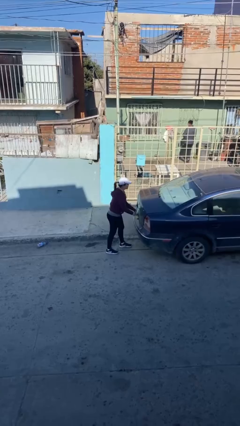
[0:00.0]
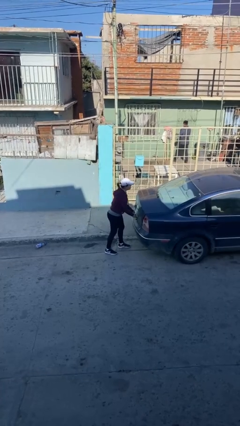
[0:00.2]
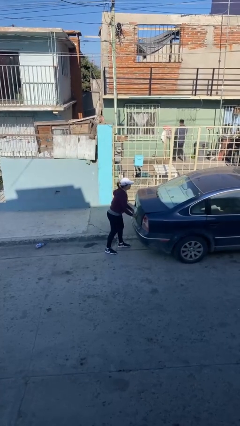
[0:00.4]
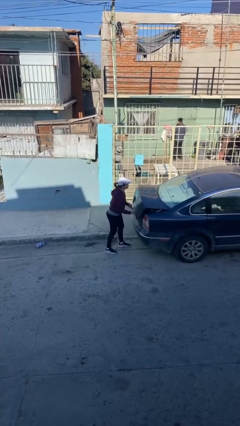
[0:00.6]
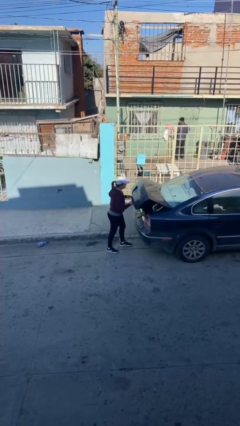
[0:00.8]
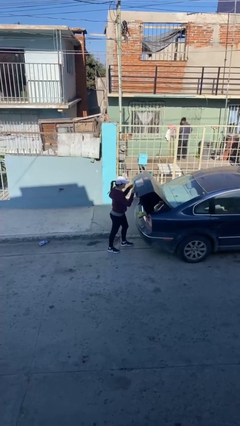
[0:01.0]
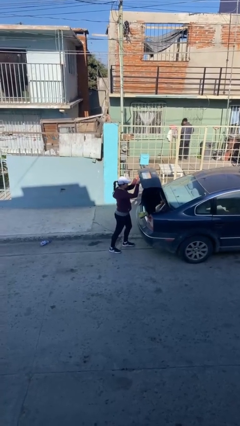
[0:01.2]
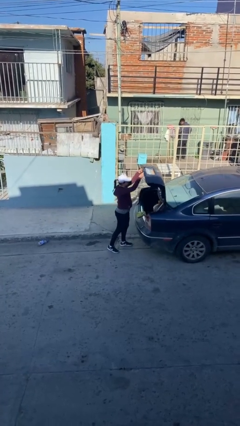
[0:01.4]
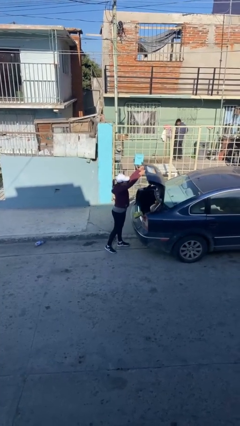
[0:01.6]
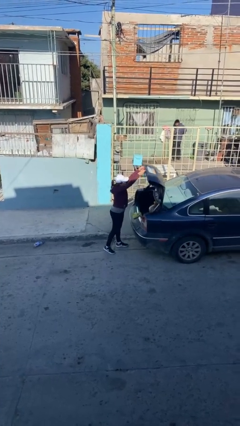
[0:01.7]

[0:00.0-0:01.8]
person opens car trunk

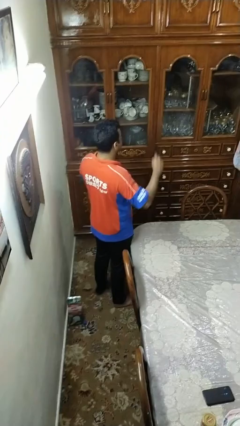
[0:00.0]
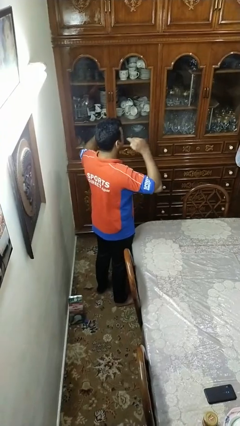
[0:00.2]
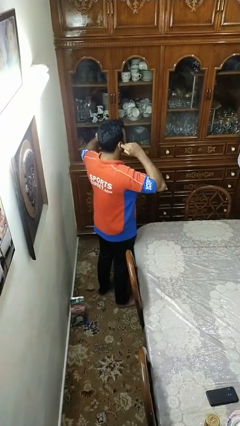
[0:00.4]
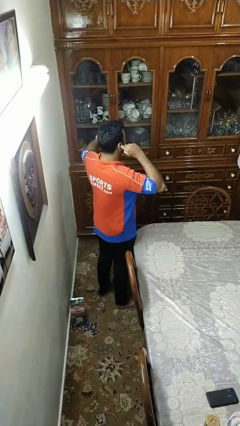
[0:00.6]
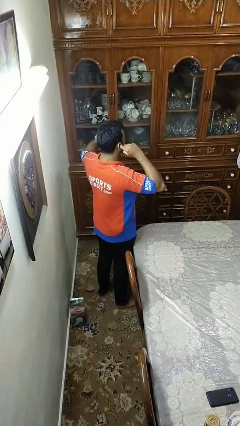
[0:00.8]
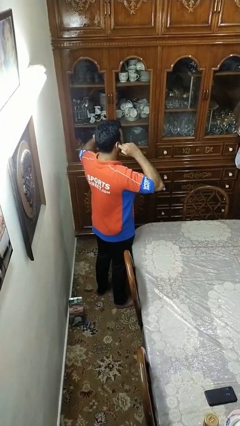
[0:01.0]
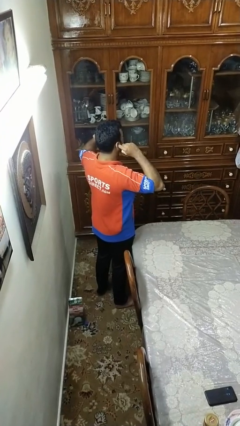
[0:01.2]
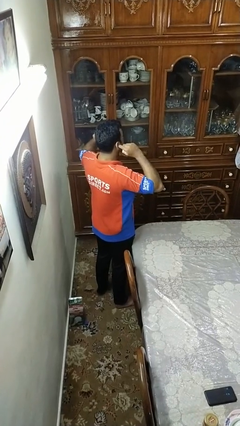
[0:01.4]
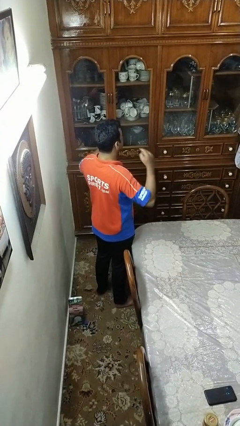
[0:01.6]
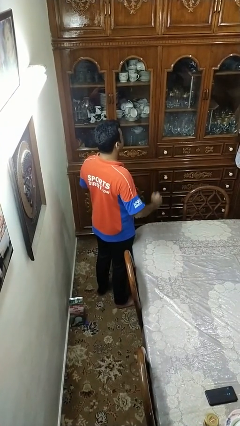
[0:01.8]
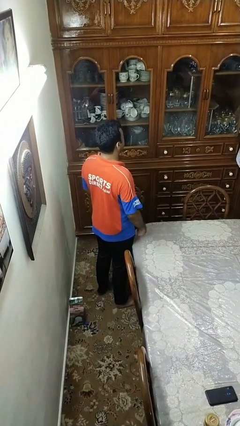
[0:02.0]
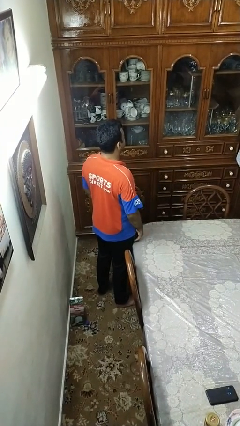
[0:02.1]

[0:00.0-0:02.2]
person puts fingers in ear

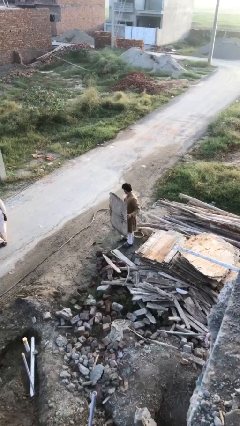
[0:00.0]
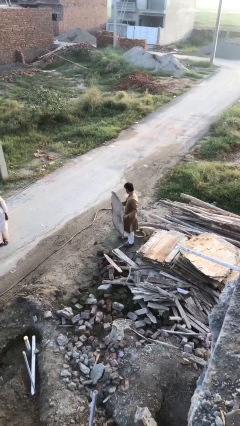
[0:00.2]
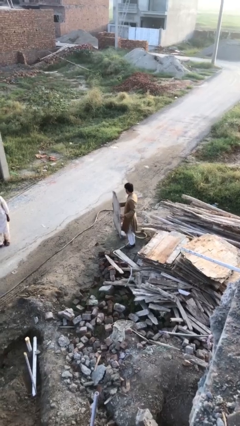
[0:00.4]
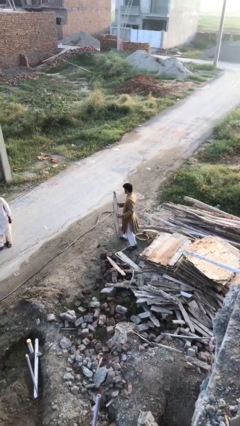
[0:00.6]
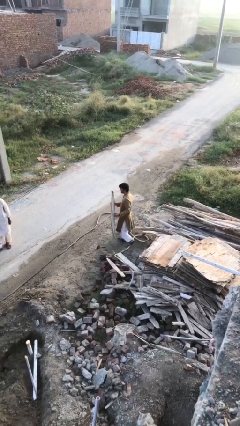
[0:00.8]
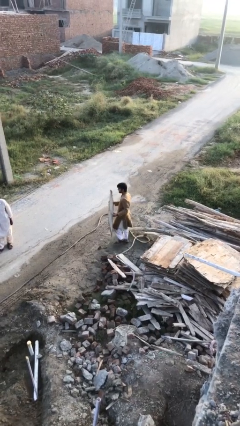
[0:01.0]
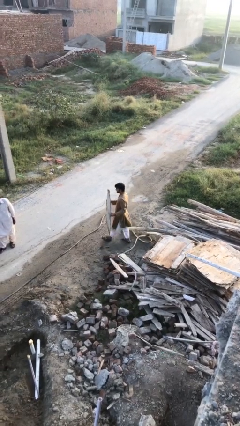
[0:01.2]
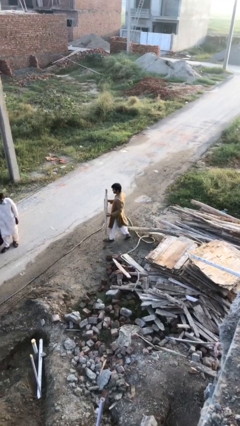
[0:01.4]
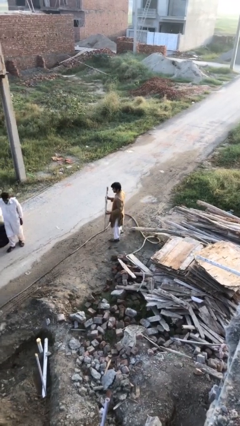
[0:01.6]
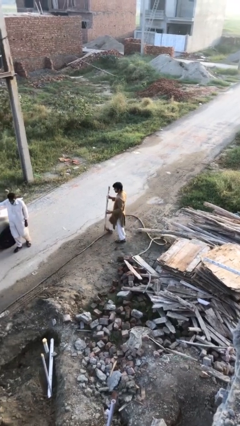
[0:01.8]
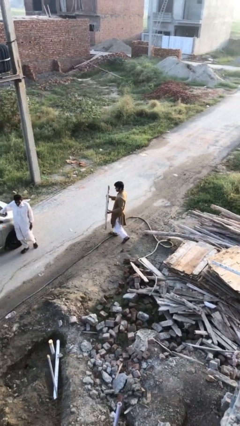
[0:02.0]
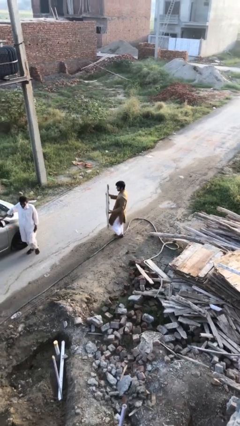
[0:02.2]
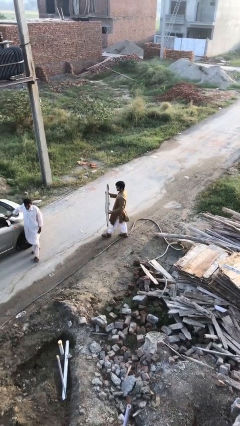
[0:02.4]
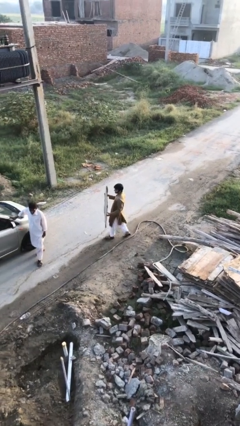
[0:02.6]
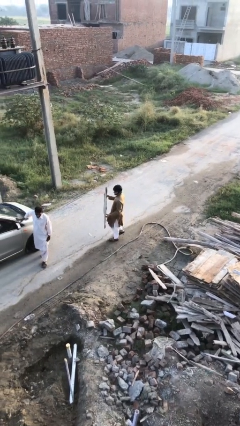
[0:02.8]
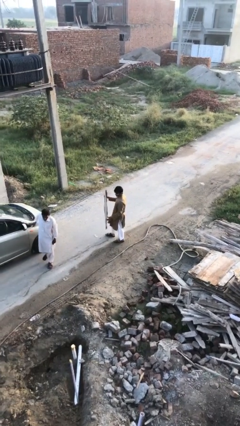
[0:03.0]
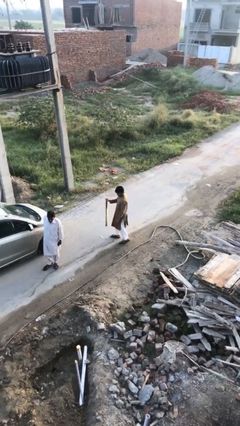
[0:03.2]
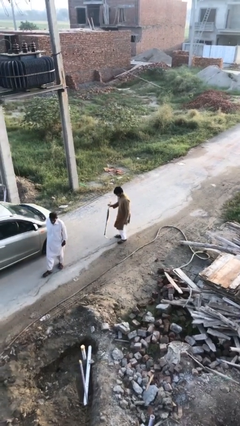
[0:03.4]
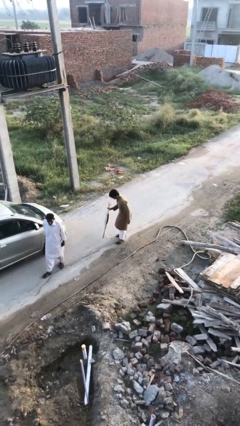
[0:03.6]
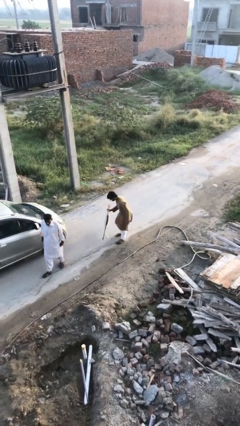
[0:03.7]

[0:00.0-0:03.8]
person carries heavy object

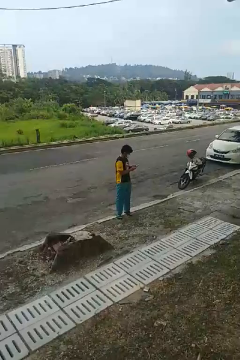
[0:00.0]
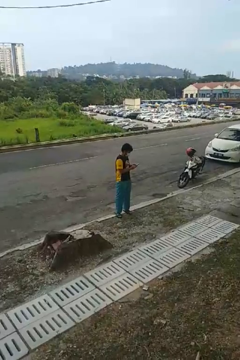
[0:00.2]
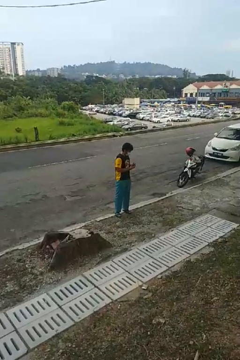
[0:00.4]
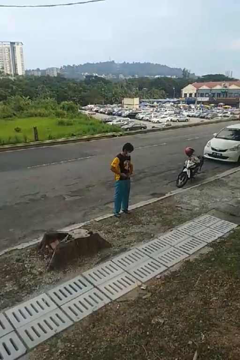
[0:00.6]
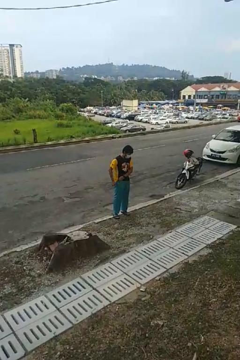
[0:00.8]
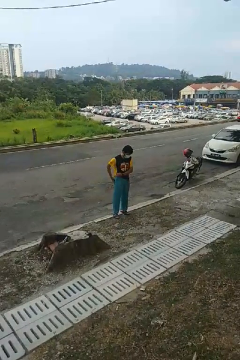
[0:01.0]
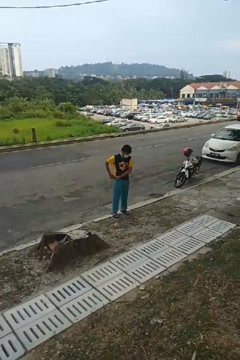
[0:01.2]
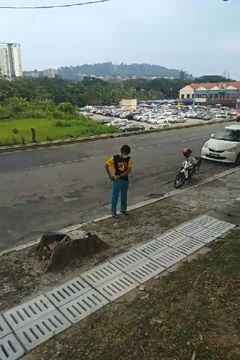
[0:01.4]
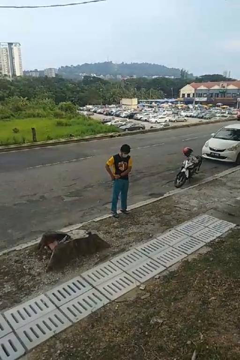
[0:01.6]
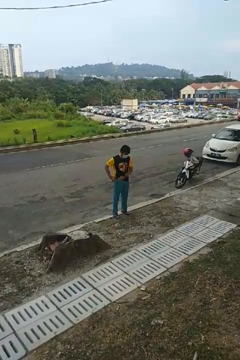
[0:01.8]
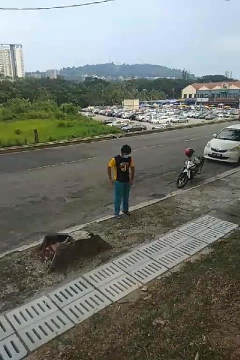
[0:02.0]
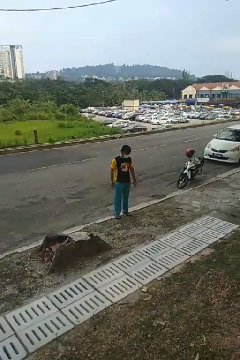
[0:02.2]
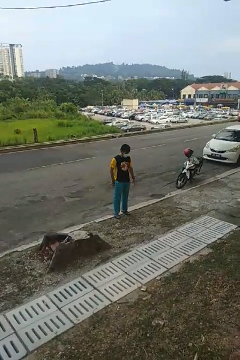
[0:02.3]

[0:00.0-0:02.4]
person puts phone into pocket

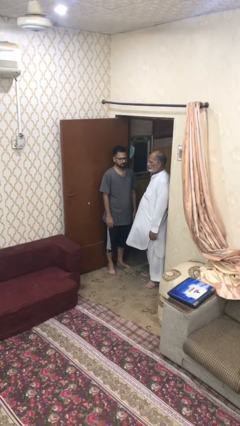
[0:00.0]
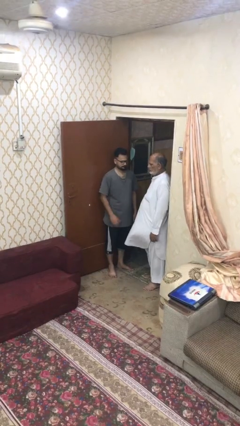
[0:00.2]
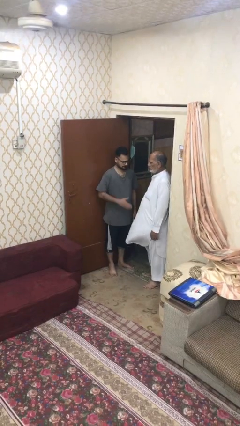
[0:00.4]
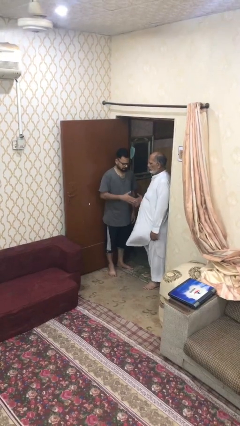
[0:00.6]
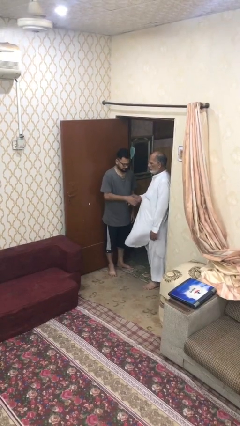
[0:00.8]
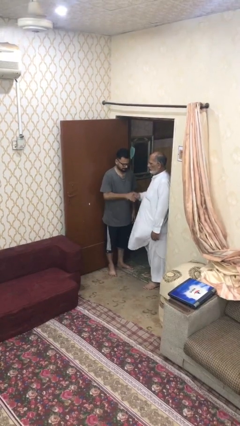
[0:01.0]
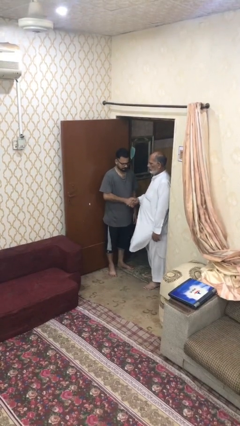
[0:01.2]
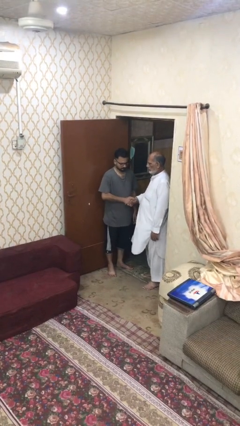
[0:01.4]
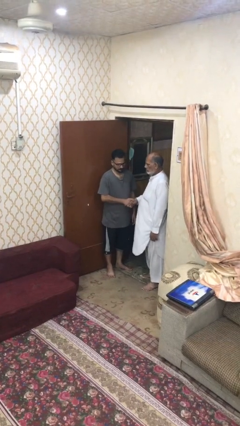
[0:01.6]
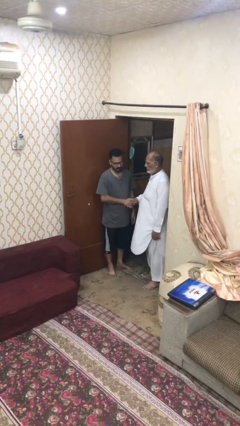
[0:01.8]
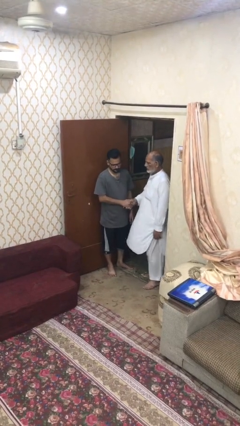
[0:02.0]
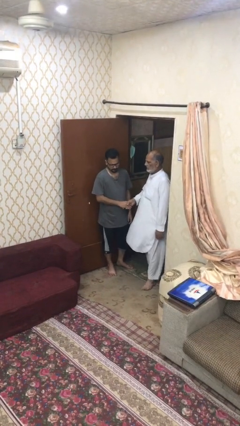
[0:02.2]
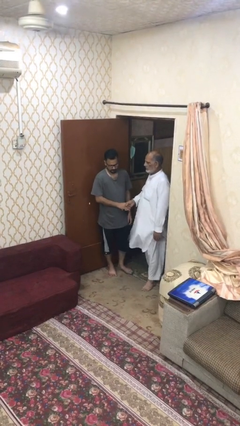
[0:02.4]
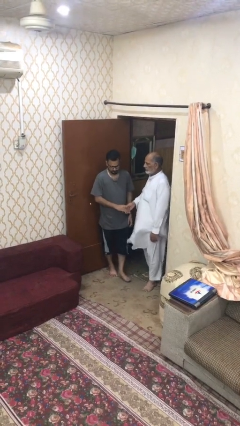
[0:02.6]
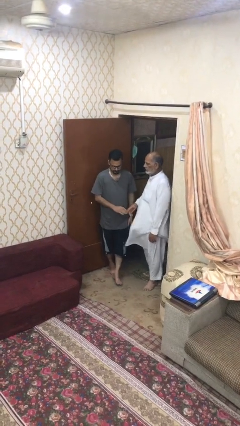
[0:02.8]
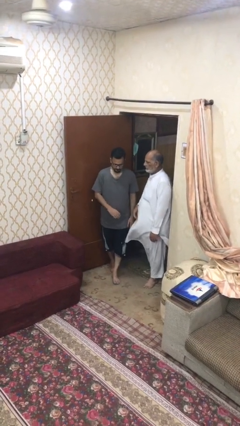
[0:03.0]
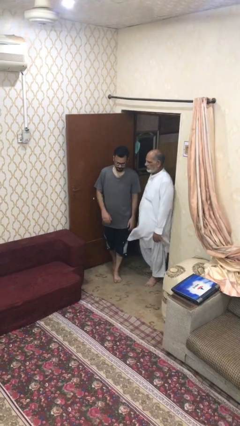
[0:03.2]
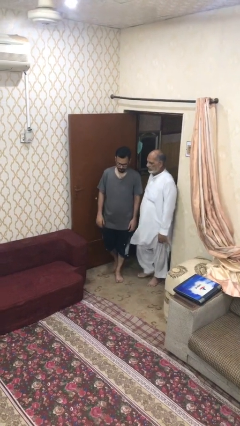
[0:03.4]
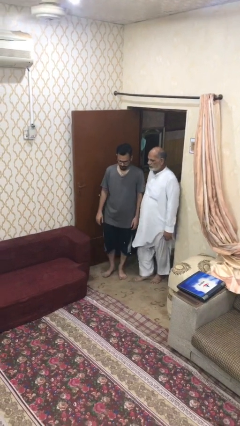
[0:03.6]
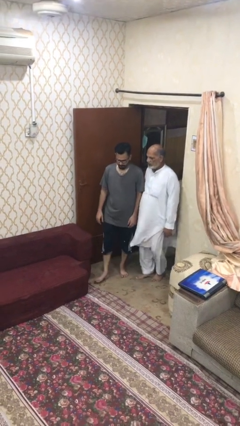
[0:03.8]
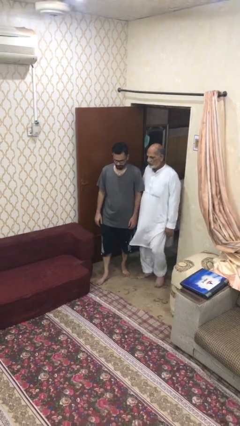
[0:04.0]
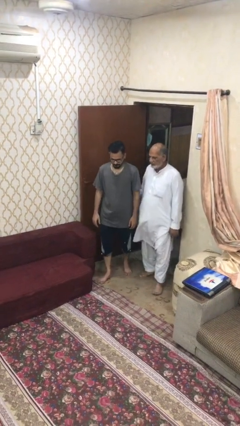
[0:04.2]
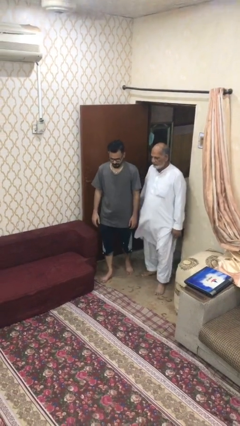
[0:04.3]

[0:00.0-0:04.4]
person shakes hand

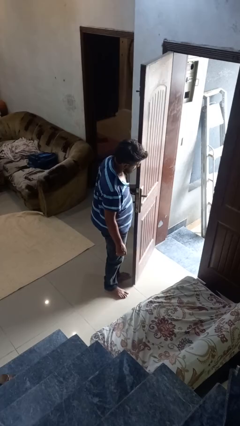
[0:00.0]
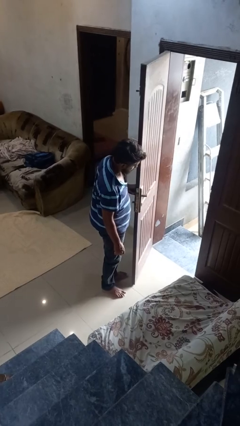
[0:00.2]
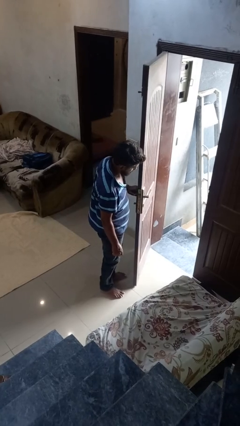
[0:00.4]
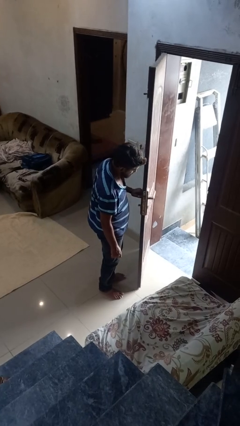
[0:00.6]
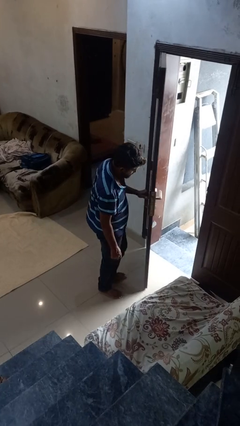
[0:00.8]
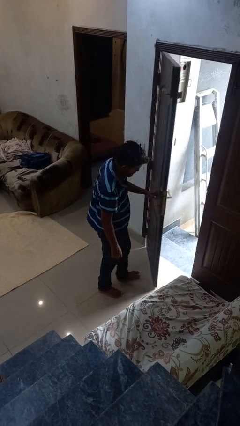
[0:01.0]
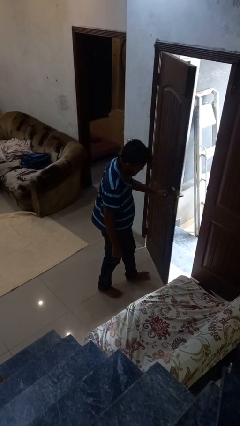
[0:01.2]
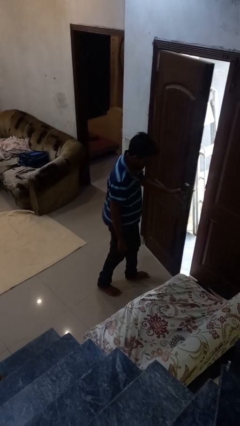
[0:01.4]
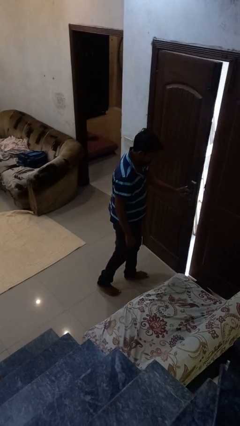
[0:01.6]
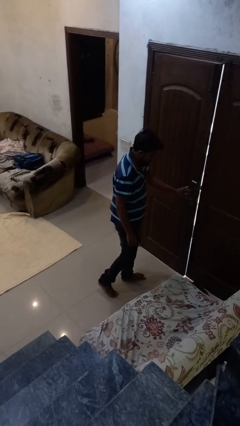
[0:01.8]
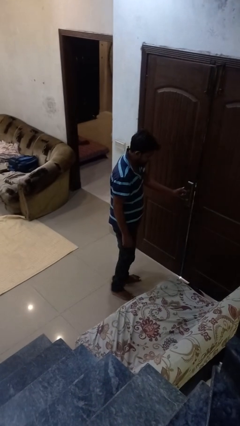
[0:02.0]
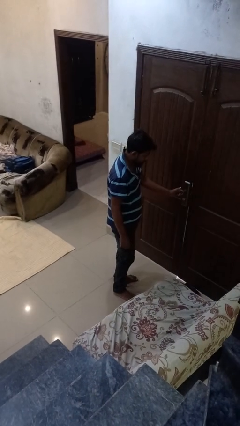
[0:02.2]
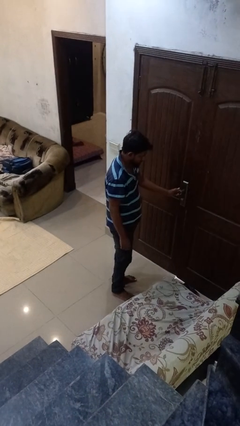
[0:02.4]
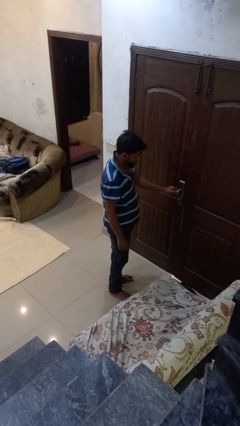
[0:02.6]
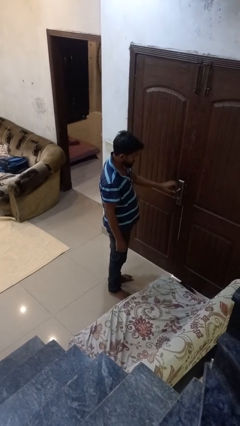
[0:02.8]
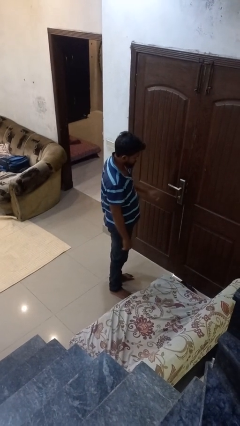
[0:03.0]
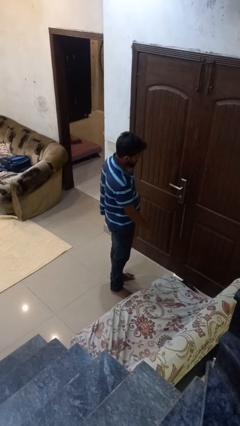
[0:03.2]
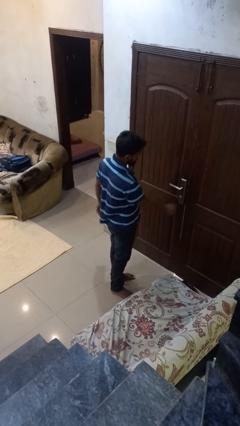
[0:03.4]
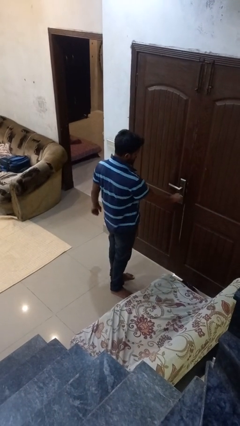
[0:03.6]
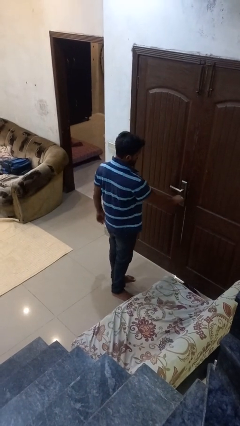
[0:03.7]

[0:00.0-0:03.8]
person closes facility door
